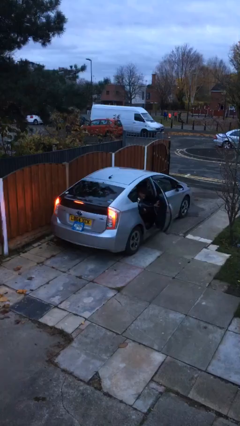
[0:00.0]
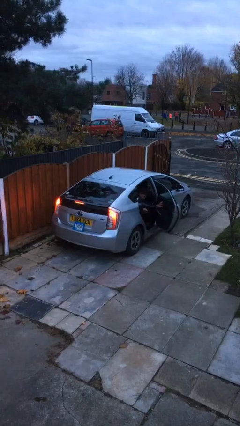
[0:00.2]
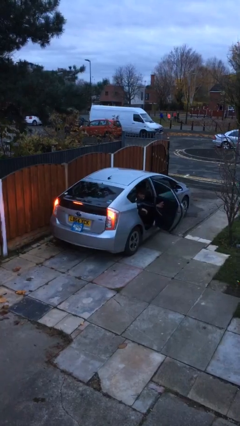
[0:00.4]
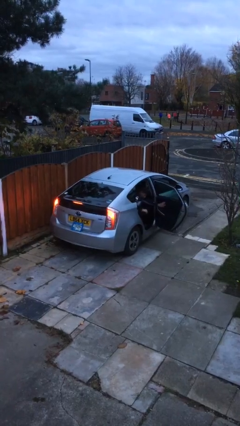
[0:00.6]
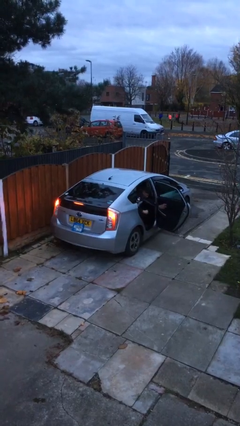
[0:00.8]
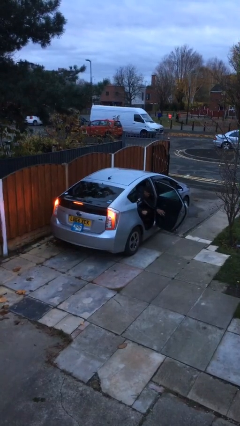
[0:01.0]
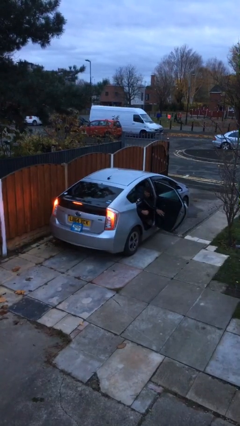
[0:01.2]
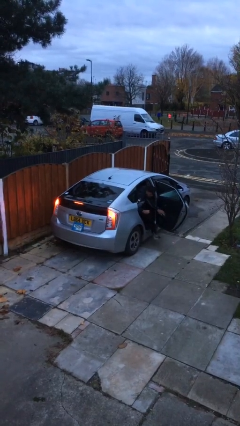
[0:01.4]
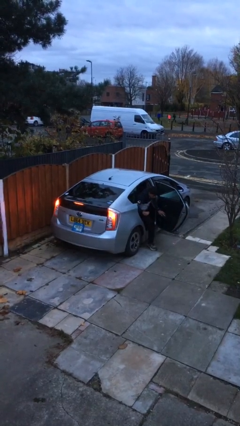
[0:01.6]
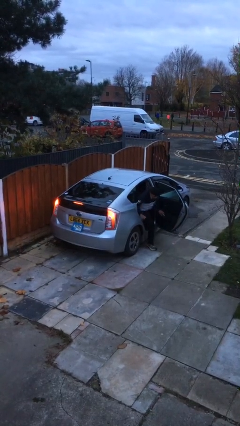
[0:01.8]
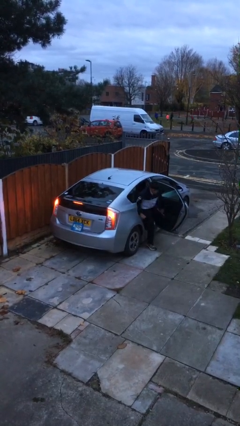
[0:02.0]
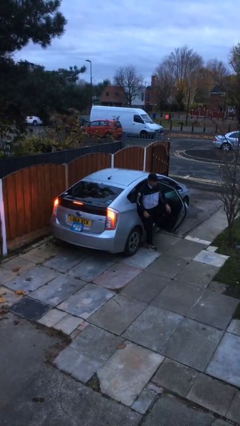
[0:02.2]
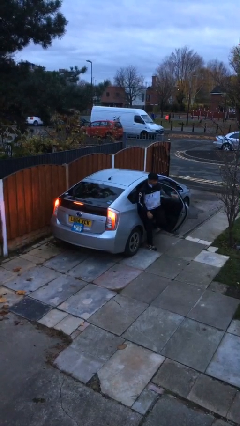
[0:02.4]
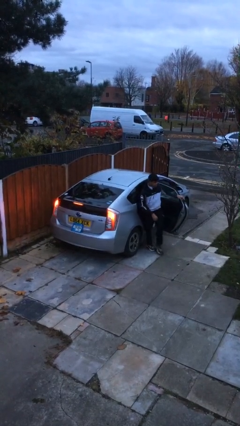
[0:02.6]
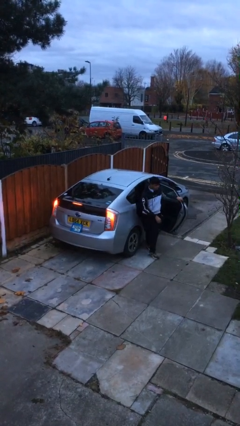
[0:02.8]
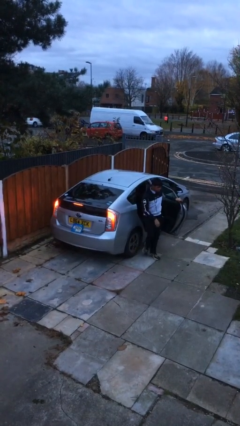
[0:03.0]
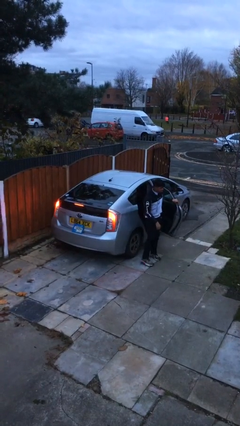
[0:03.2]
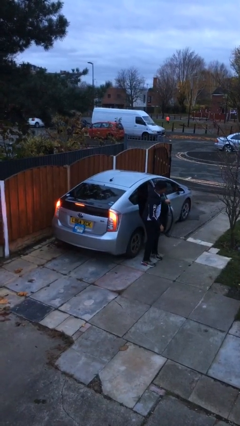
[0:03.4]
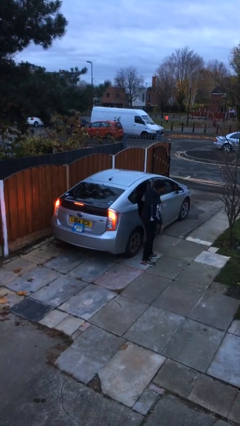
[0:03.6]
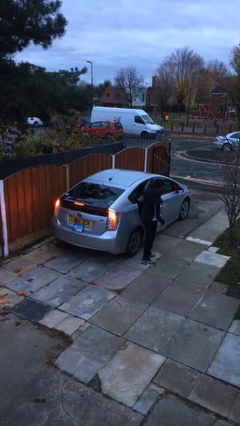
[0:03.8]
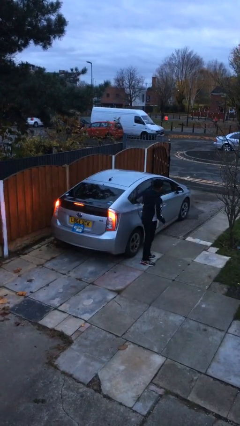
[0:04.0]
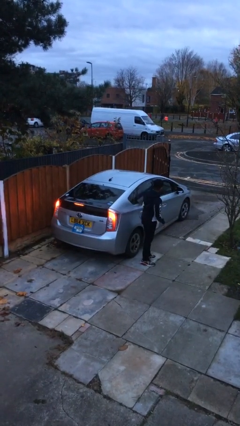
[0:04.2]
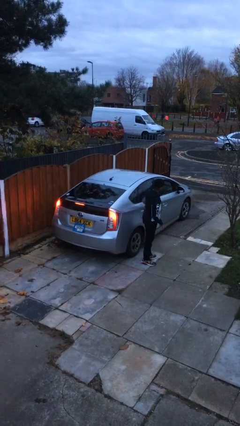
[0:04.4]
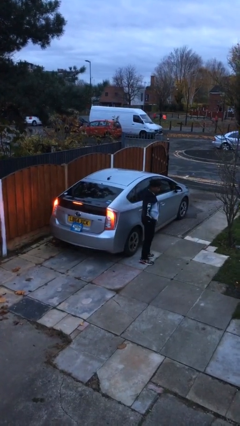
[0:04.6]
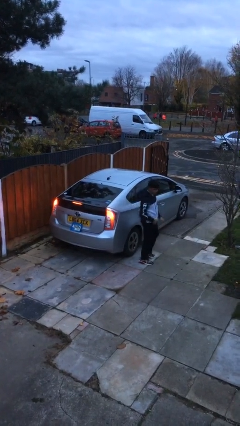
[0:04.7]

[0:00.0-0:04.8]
car drops off person

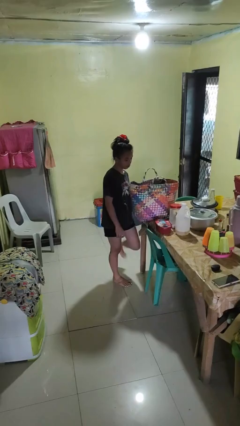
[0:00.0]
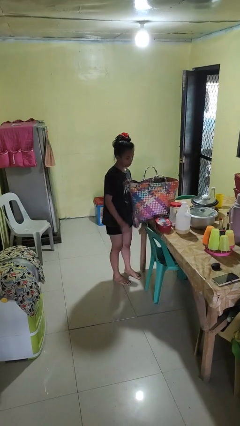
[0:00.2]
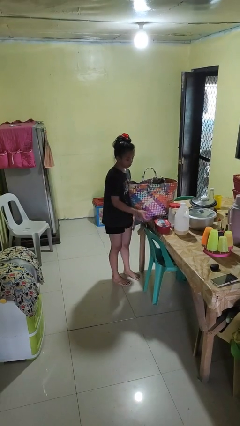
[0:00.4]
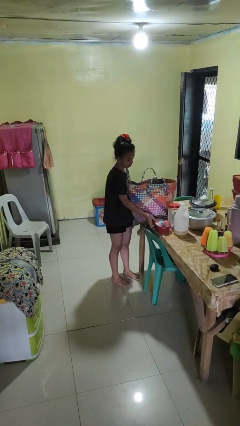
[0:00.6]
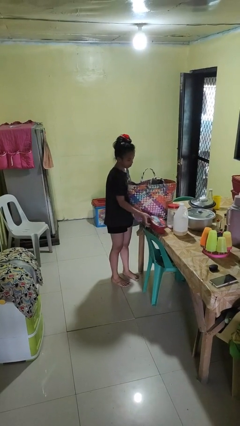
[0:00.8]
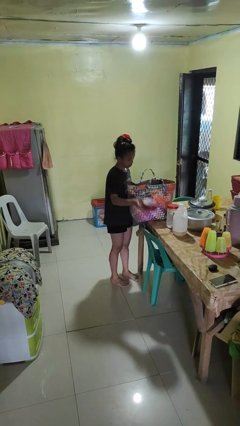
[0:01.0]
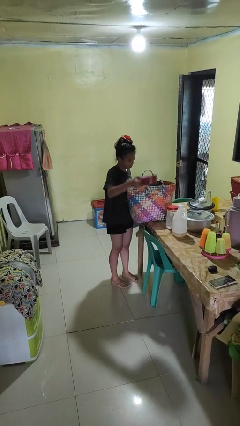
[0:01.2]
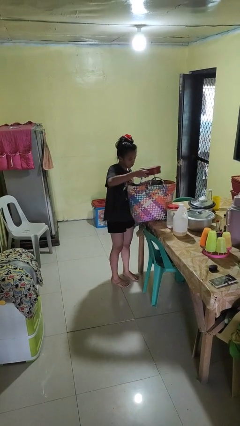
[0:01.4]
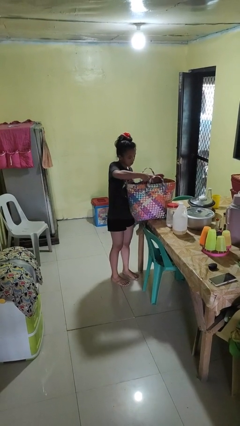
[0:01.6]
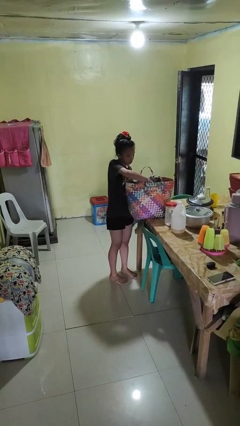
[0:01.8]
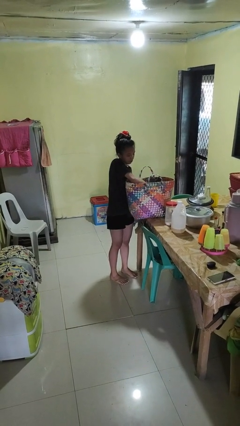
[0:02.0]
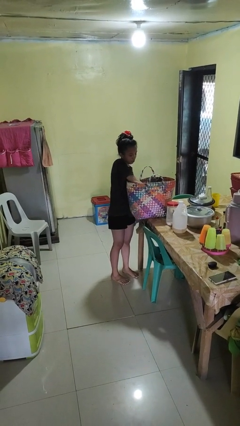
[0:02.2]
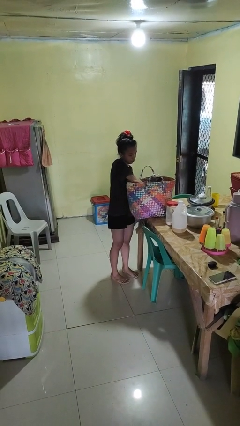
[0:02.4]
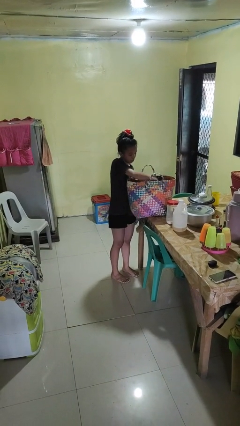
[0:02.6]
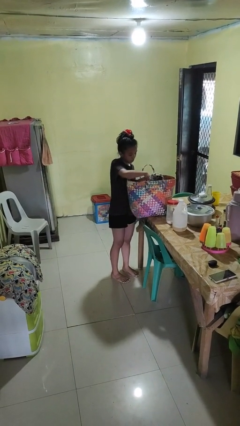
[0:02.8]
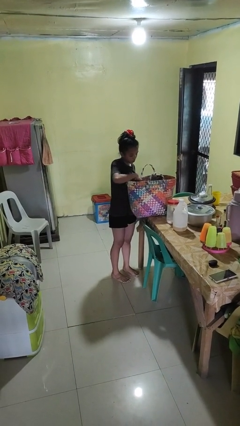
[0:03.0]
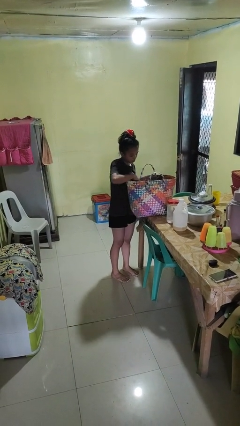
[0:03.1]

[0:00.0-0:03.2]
person puts object into basket

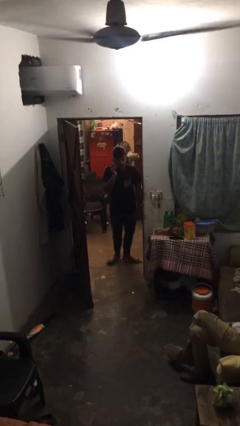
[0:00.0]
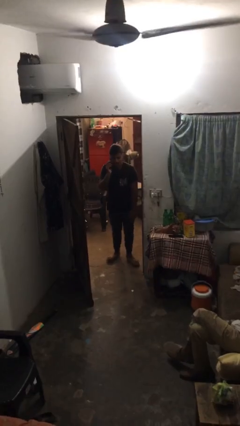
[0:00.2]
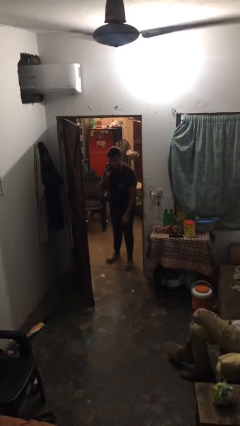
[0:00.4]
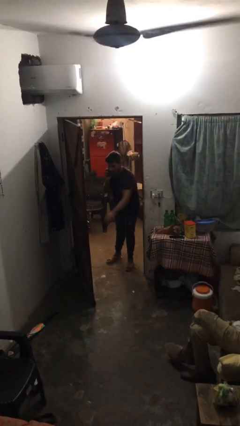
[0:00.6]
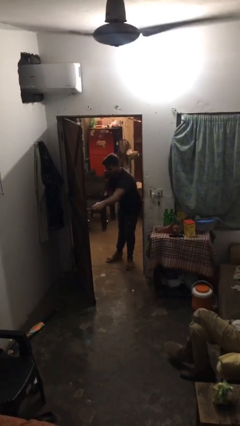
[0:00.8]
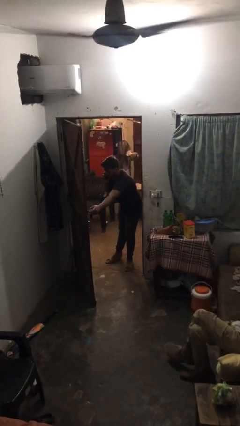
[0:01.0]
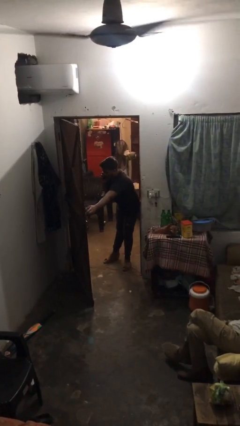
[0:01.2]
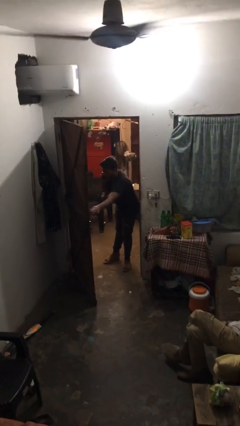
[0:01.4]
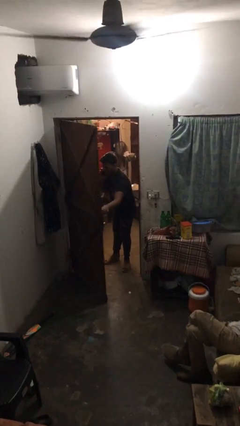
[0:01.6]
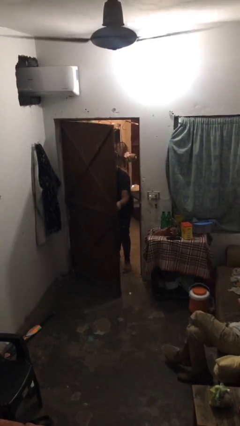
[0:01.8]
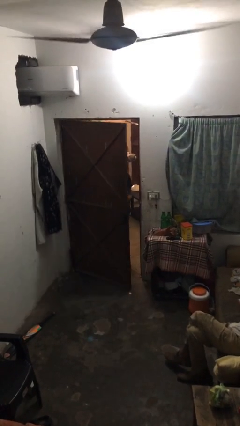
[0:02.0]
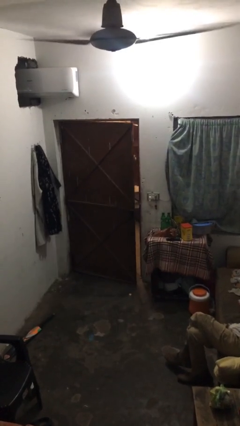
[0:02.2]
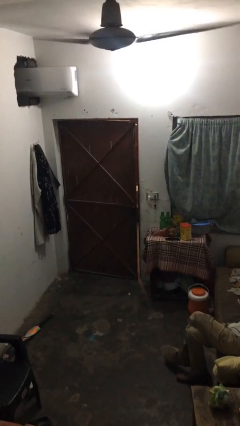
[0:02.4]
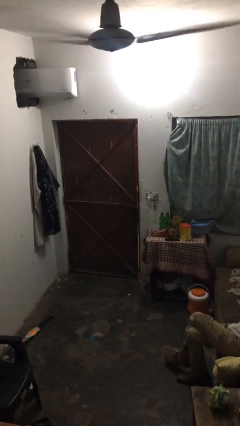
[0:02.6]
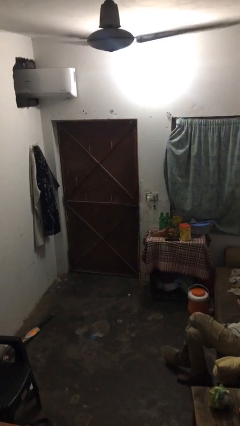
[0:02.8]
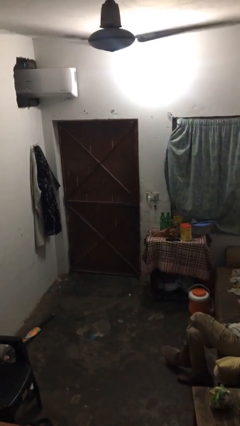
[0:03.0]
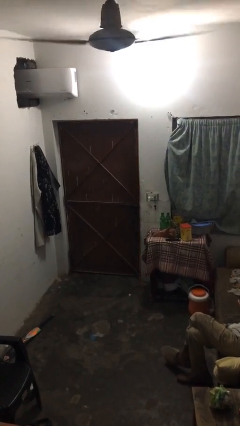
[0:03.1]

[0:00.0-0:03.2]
person closes facility door

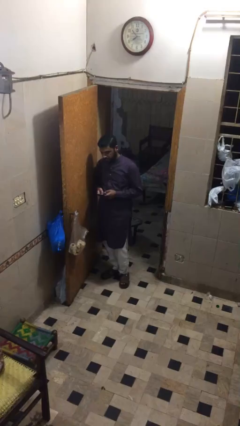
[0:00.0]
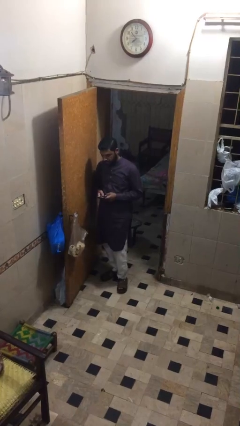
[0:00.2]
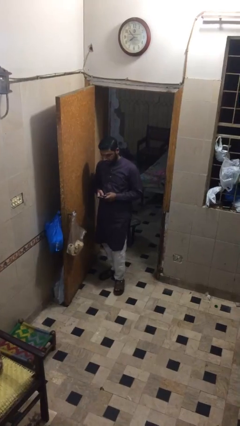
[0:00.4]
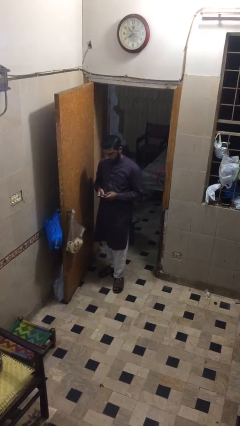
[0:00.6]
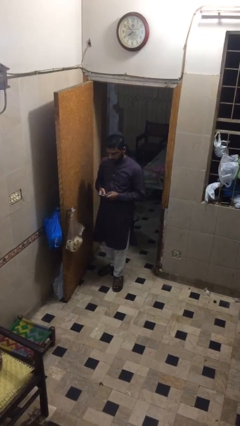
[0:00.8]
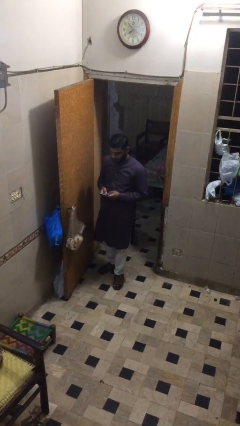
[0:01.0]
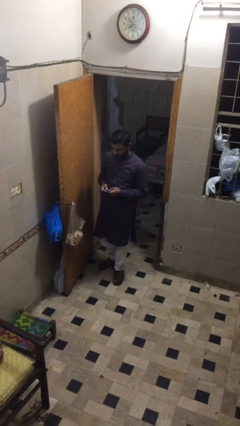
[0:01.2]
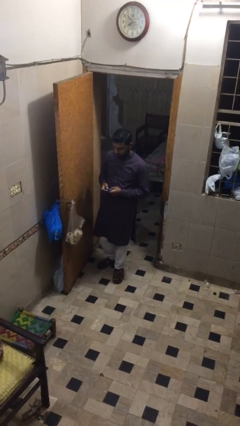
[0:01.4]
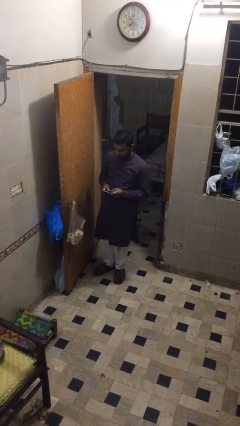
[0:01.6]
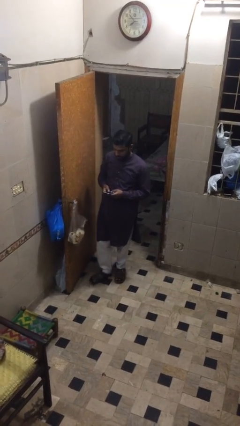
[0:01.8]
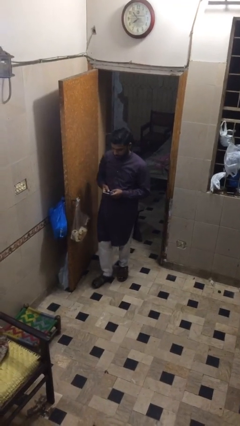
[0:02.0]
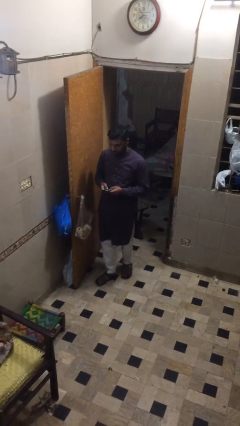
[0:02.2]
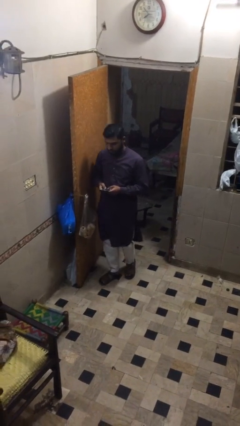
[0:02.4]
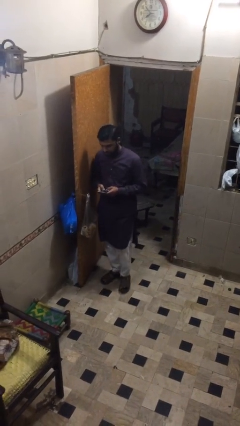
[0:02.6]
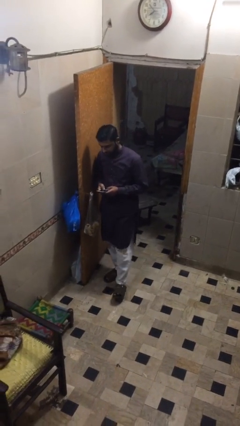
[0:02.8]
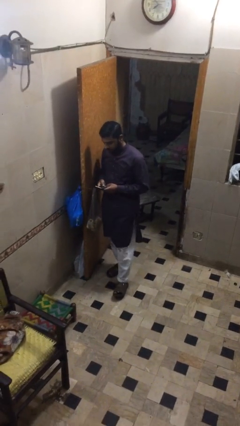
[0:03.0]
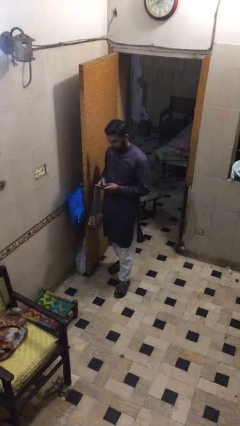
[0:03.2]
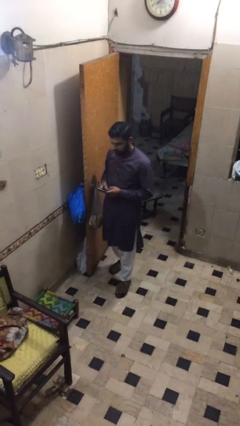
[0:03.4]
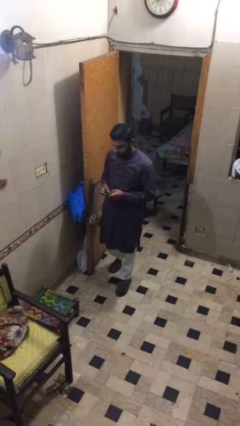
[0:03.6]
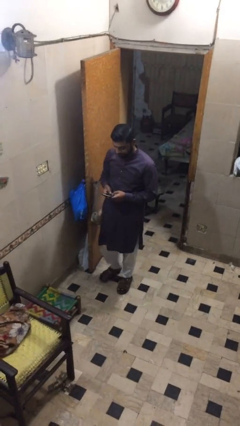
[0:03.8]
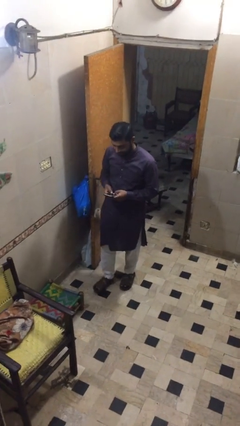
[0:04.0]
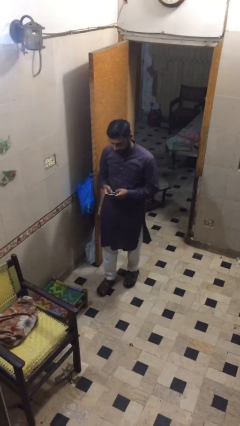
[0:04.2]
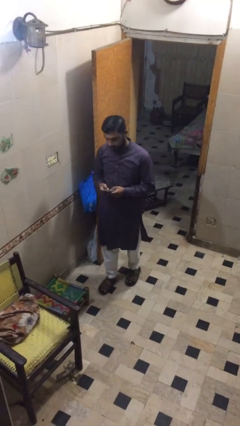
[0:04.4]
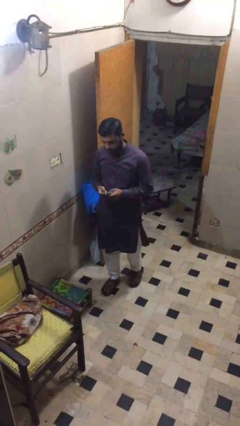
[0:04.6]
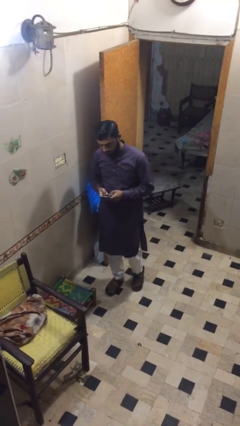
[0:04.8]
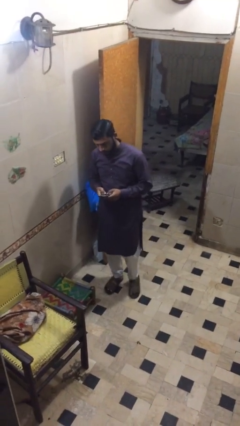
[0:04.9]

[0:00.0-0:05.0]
person texts on phone

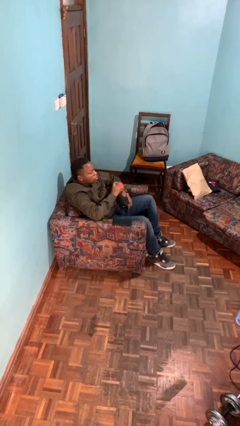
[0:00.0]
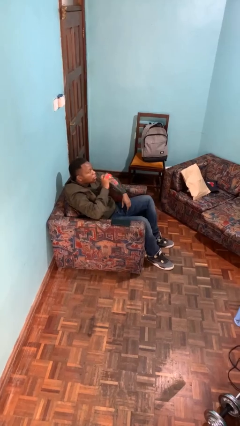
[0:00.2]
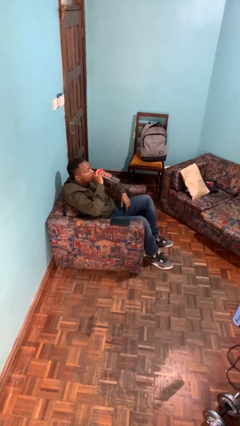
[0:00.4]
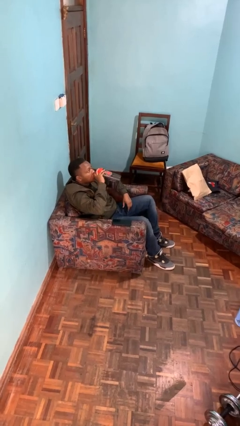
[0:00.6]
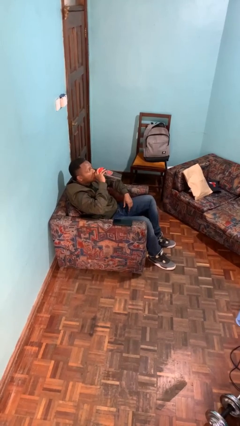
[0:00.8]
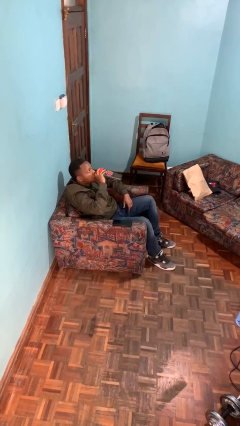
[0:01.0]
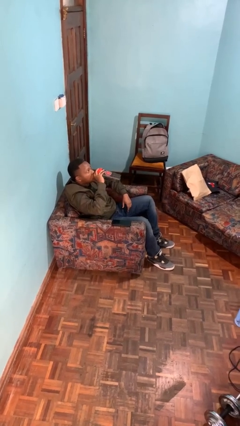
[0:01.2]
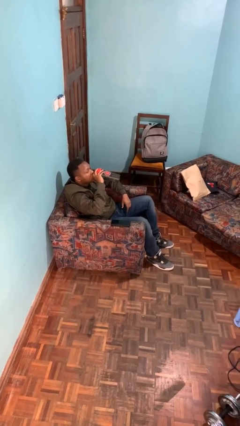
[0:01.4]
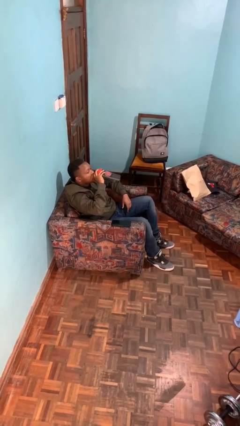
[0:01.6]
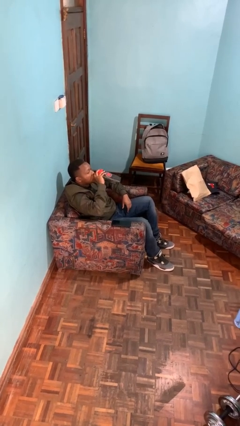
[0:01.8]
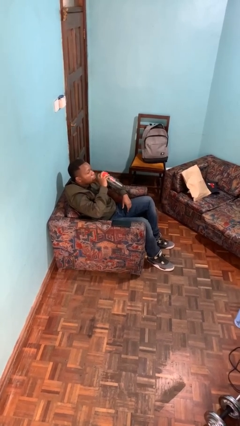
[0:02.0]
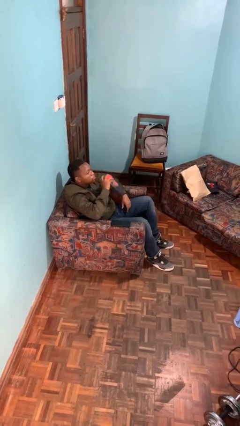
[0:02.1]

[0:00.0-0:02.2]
person drinks from bottle
